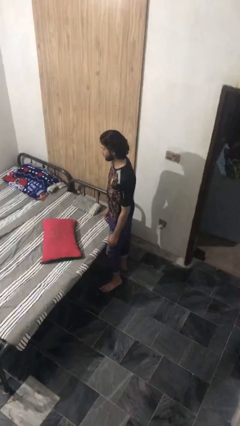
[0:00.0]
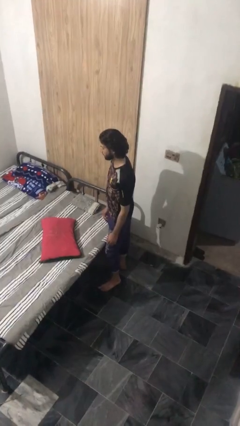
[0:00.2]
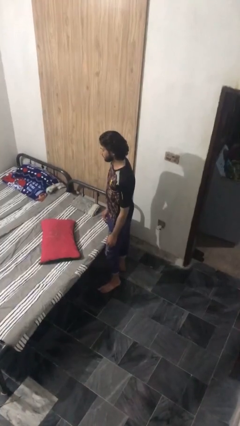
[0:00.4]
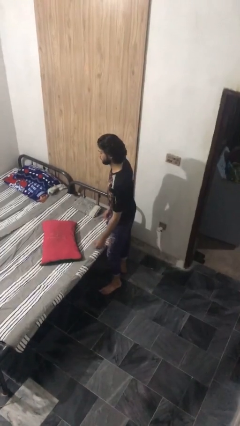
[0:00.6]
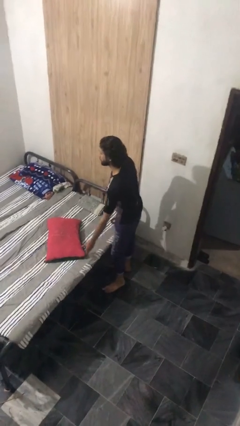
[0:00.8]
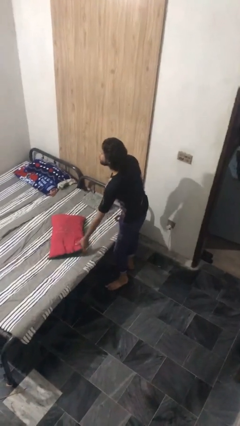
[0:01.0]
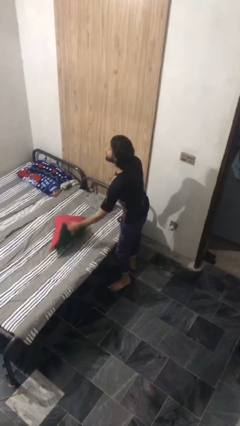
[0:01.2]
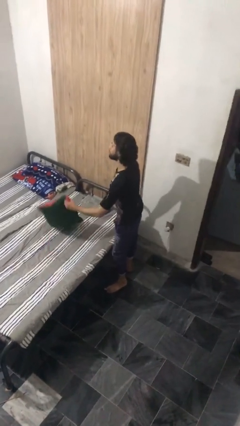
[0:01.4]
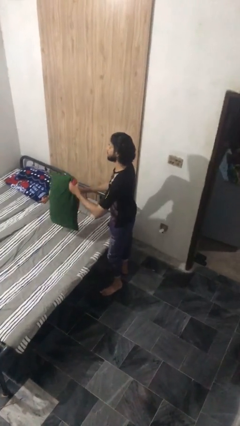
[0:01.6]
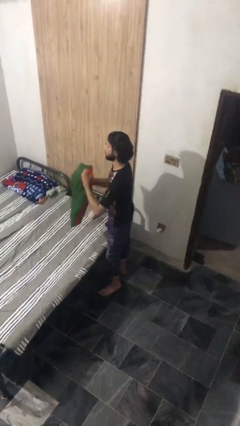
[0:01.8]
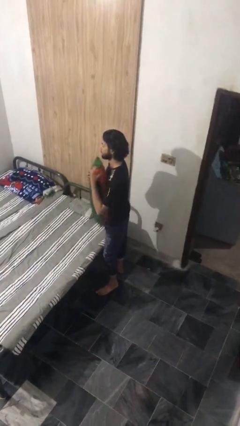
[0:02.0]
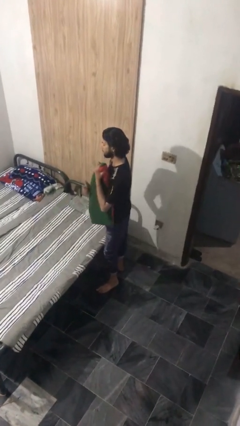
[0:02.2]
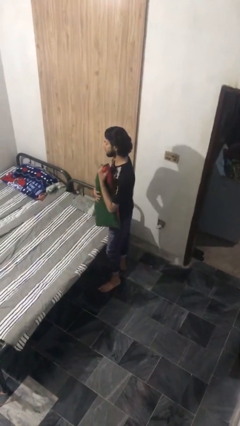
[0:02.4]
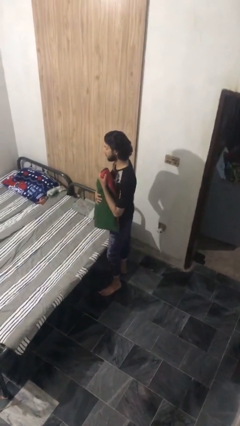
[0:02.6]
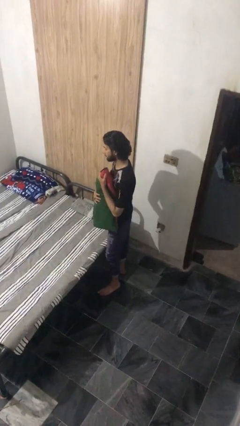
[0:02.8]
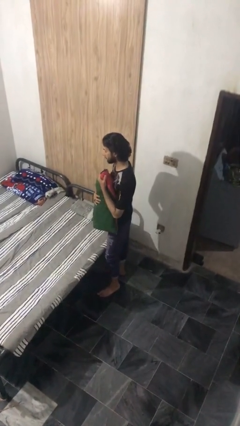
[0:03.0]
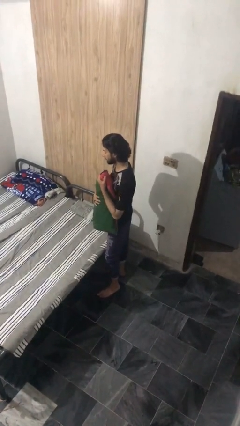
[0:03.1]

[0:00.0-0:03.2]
person picks up object from bed

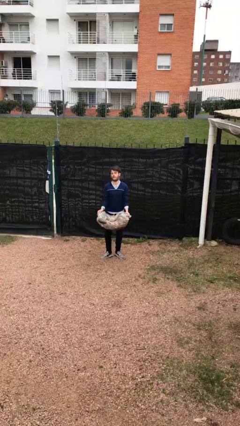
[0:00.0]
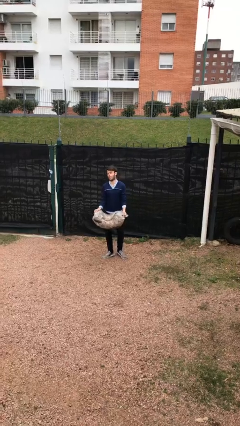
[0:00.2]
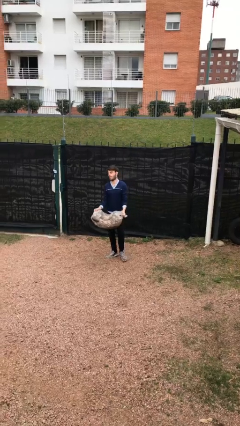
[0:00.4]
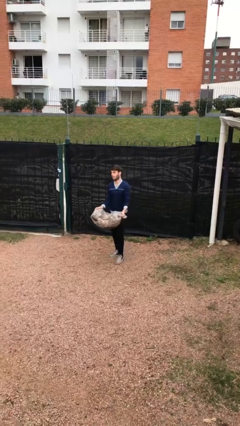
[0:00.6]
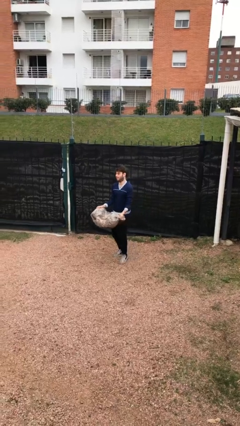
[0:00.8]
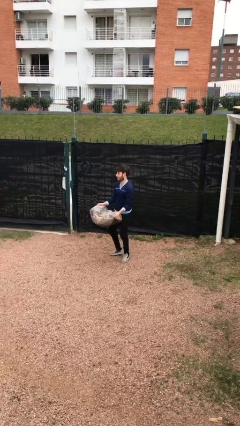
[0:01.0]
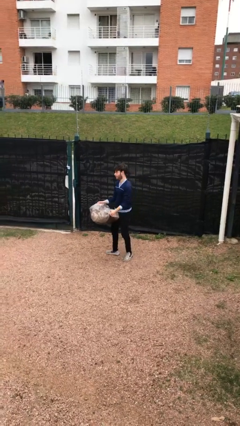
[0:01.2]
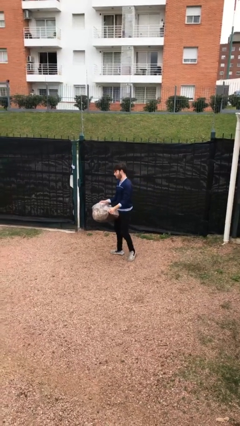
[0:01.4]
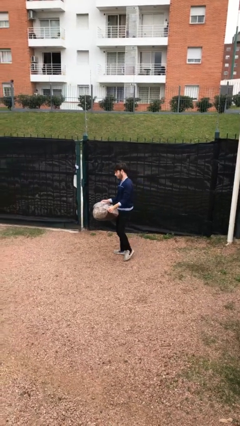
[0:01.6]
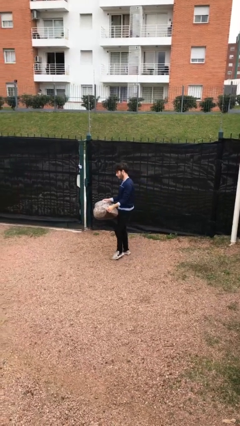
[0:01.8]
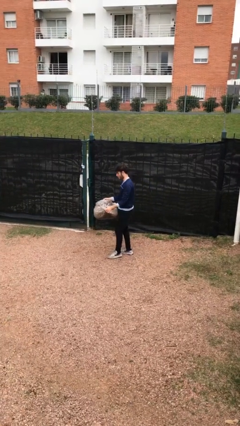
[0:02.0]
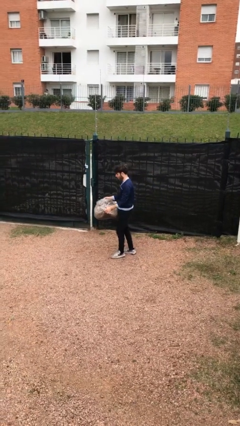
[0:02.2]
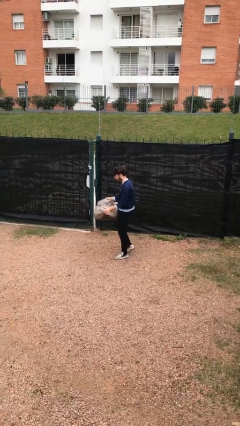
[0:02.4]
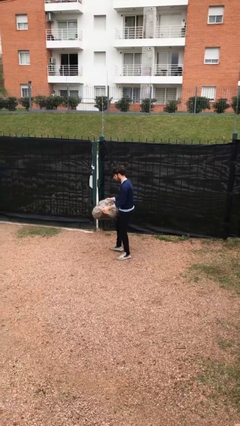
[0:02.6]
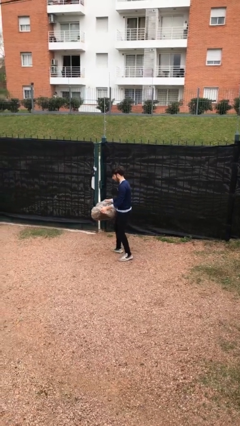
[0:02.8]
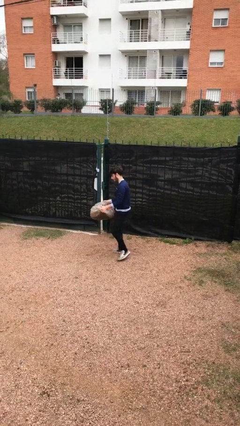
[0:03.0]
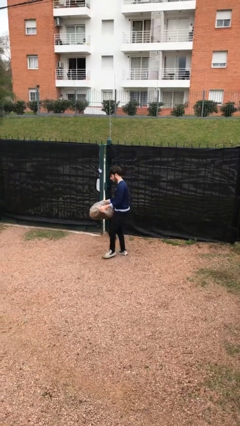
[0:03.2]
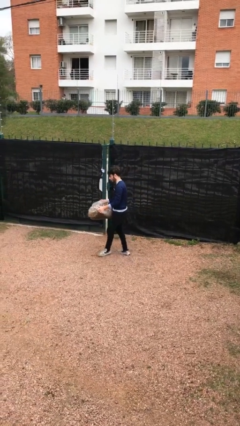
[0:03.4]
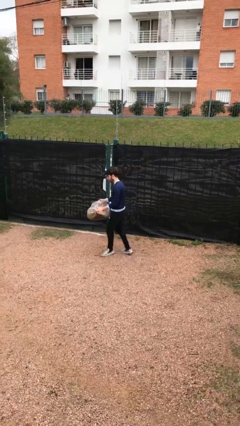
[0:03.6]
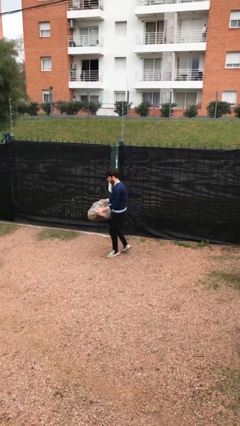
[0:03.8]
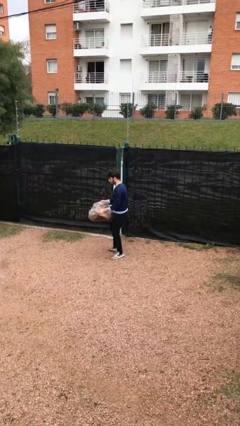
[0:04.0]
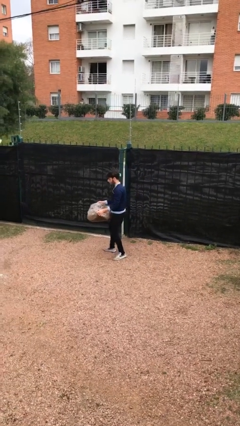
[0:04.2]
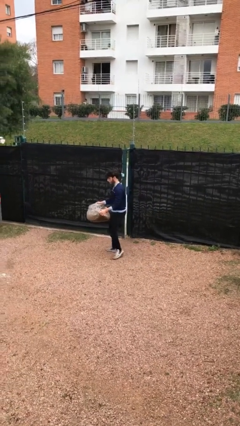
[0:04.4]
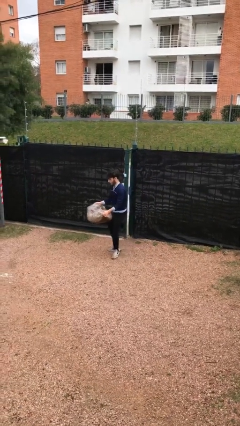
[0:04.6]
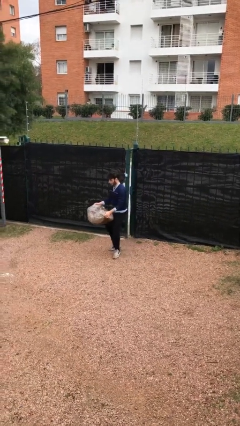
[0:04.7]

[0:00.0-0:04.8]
person carries heavy object

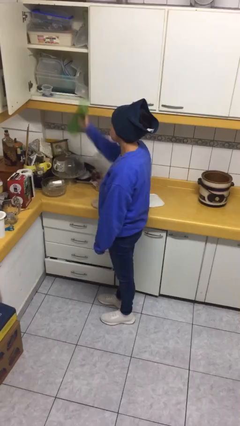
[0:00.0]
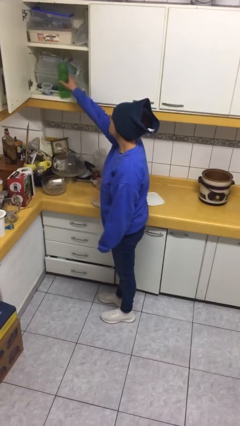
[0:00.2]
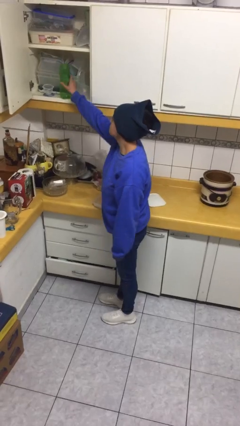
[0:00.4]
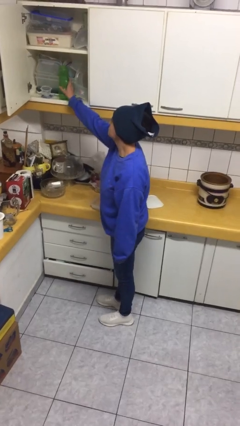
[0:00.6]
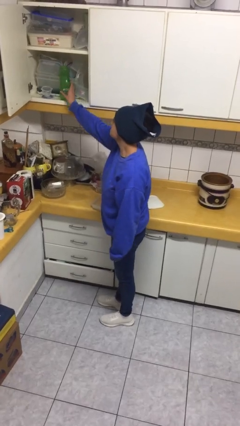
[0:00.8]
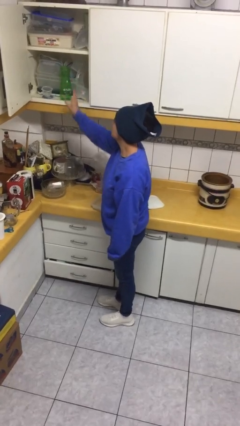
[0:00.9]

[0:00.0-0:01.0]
person puts object in cabinet

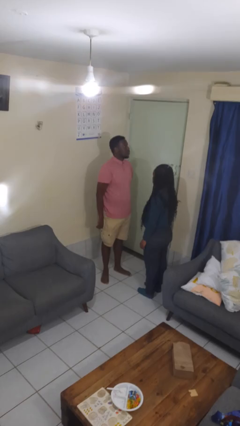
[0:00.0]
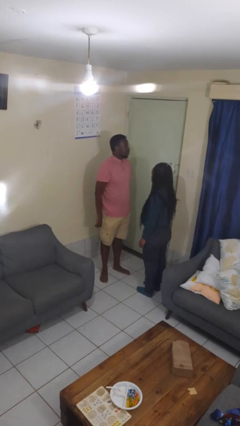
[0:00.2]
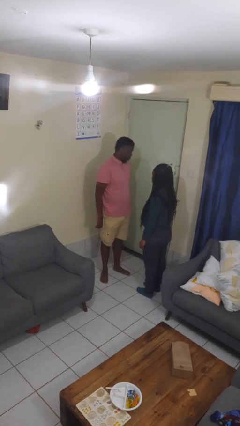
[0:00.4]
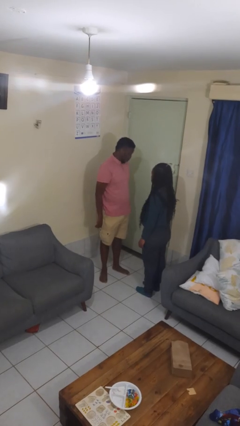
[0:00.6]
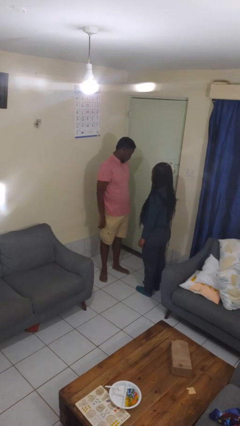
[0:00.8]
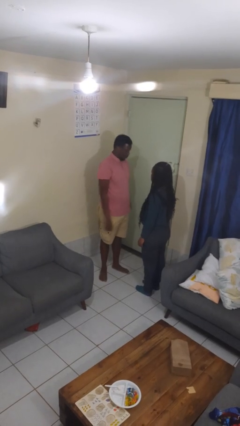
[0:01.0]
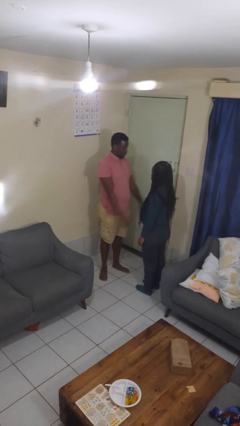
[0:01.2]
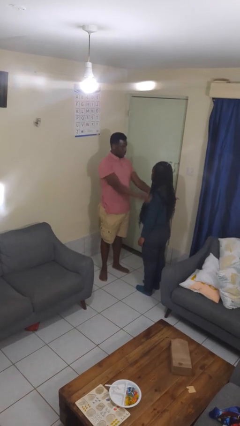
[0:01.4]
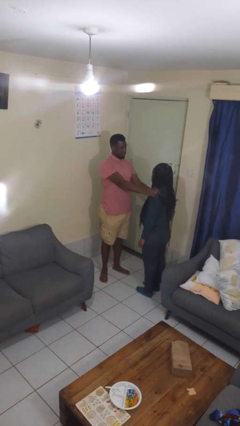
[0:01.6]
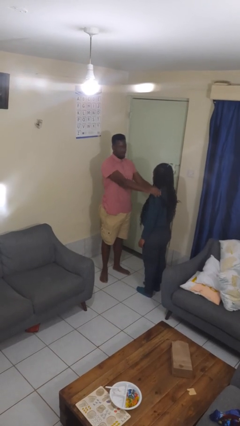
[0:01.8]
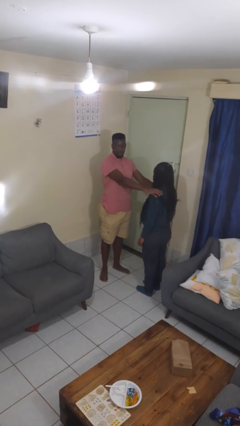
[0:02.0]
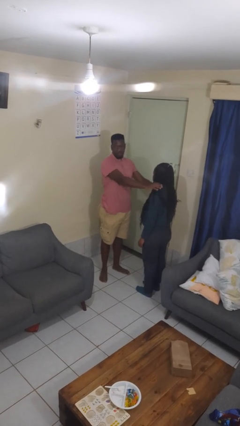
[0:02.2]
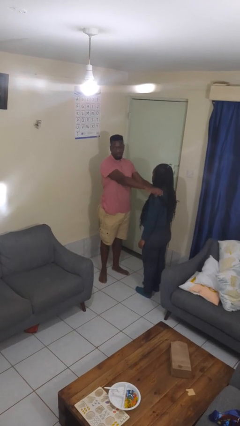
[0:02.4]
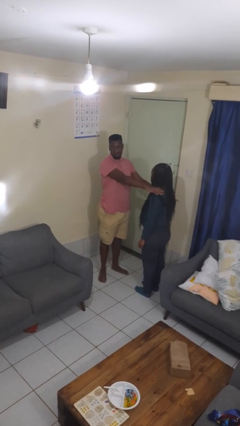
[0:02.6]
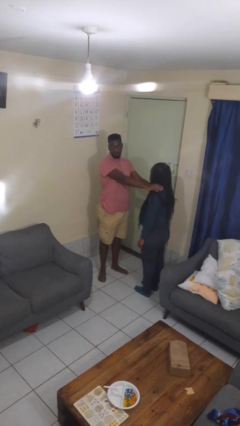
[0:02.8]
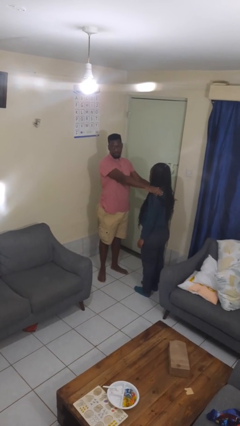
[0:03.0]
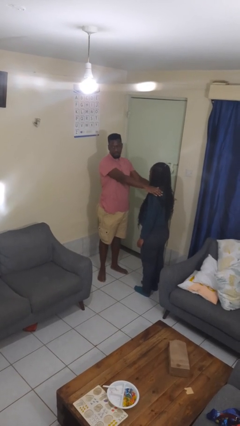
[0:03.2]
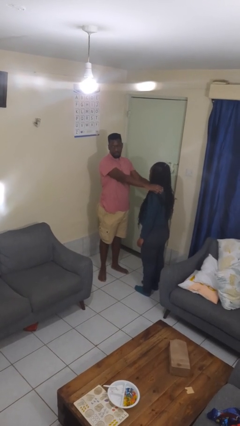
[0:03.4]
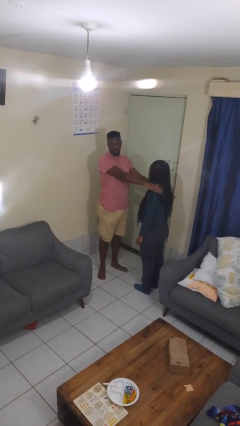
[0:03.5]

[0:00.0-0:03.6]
person pounds shoulders of person

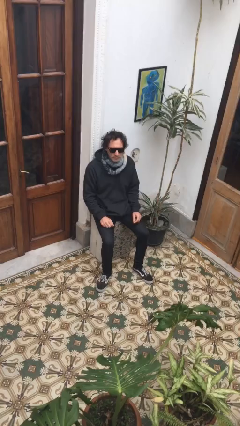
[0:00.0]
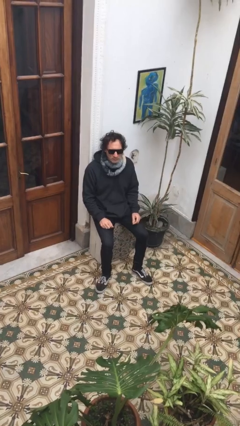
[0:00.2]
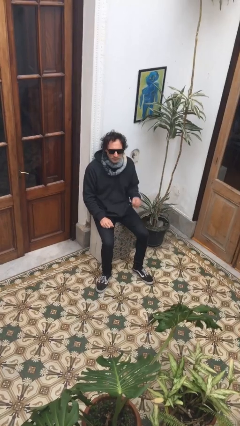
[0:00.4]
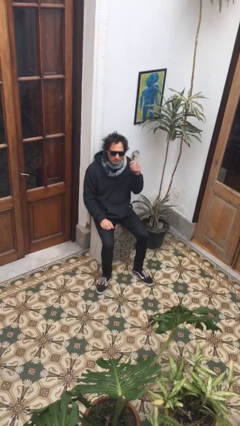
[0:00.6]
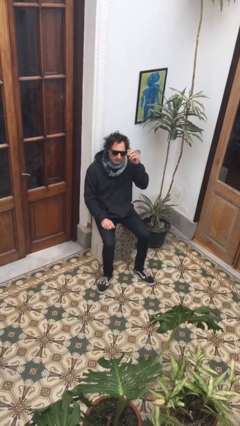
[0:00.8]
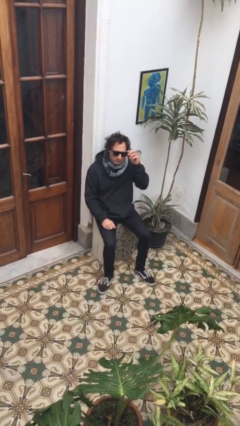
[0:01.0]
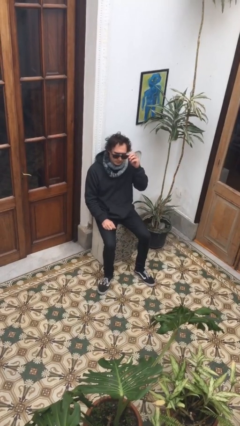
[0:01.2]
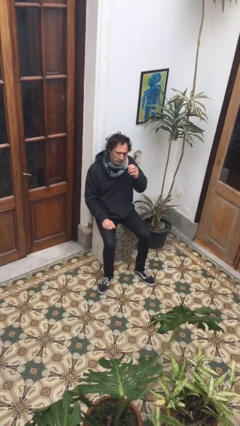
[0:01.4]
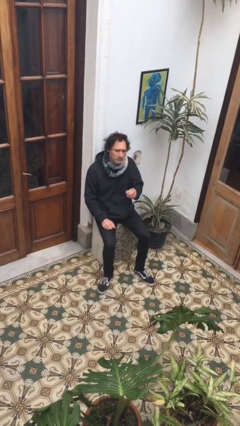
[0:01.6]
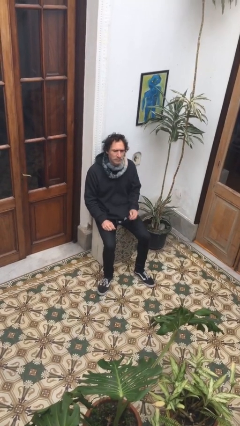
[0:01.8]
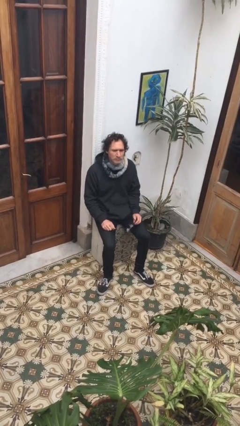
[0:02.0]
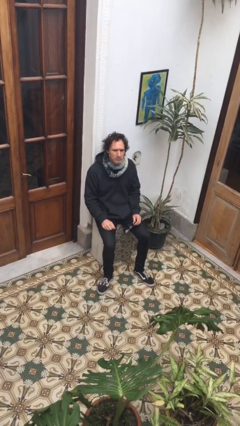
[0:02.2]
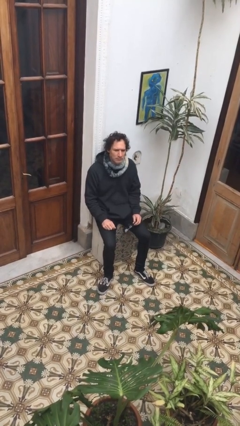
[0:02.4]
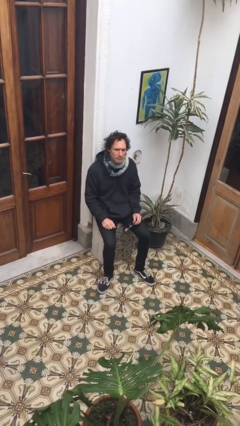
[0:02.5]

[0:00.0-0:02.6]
person takes off sunglasses

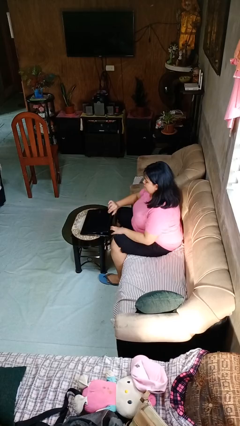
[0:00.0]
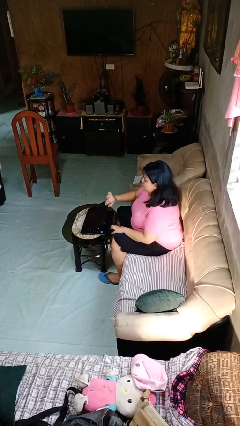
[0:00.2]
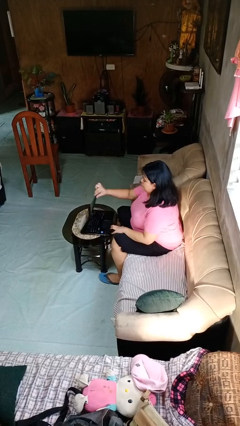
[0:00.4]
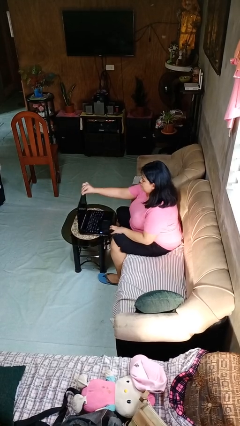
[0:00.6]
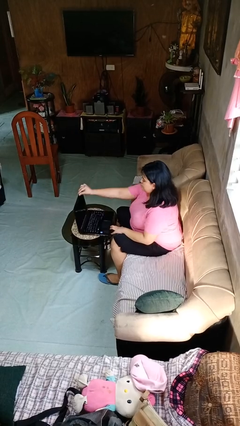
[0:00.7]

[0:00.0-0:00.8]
person opens laptop

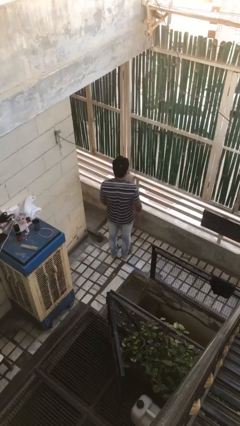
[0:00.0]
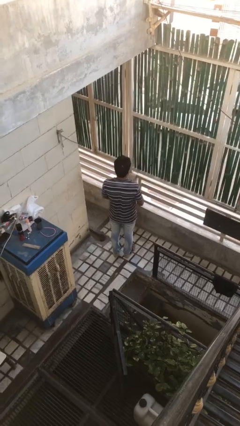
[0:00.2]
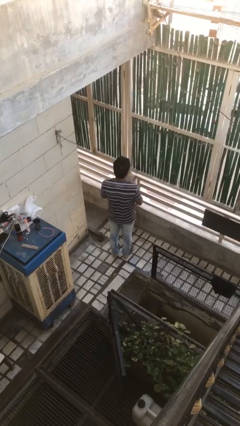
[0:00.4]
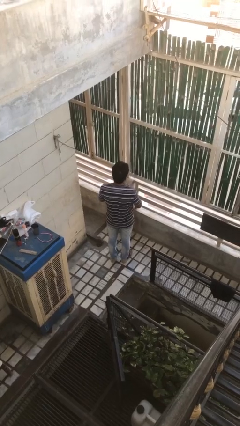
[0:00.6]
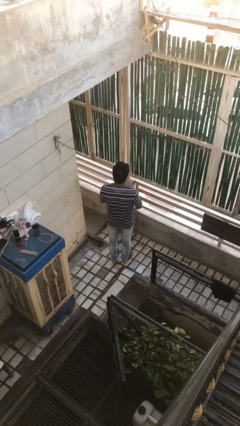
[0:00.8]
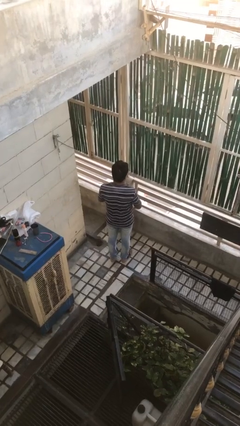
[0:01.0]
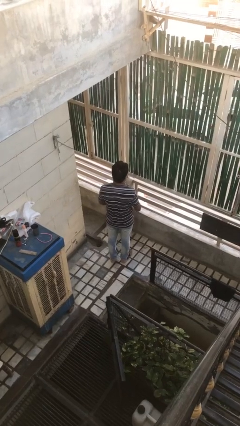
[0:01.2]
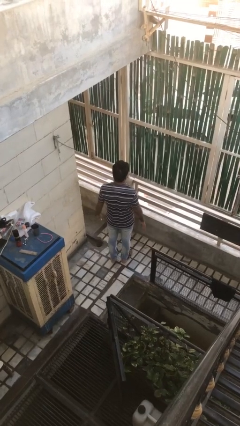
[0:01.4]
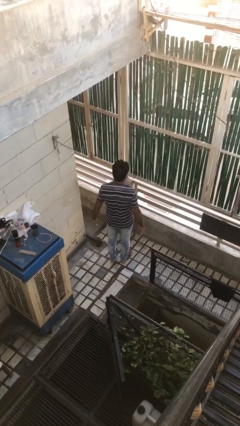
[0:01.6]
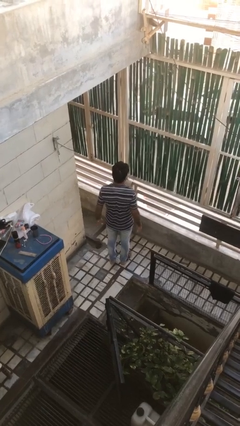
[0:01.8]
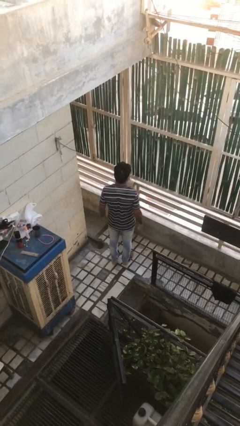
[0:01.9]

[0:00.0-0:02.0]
person takes off ring
